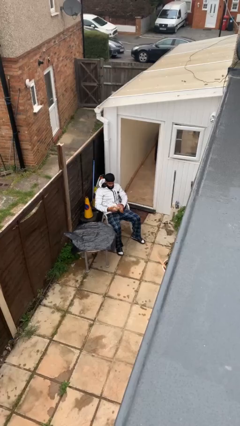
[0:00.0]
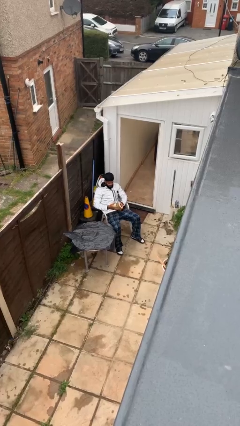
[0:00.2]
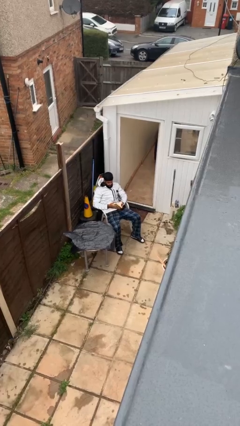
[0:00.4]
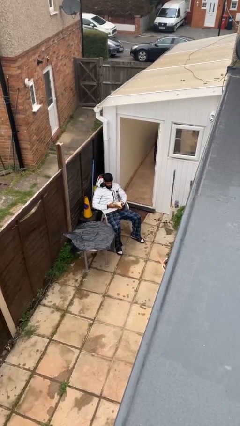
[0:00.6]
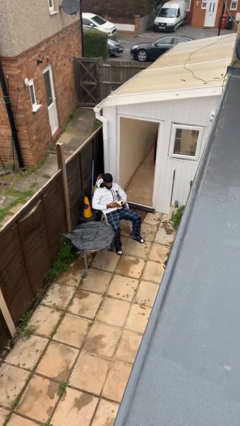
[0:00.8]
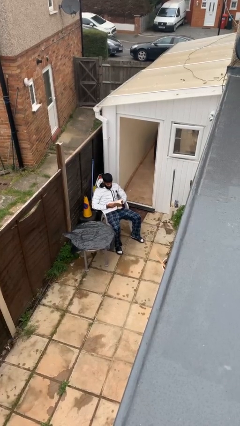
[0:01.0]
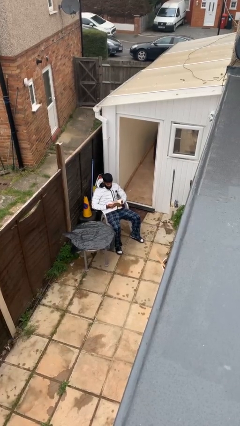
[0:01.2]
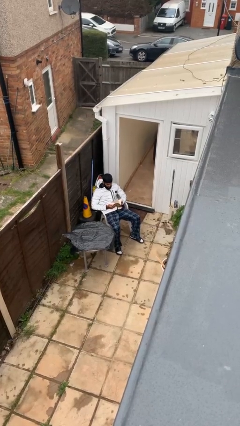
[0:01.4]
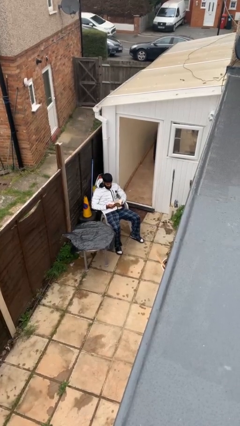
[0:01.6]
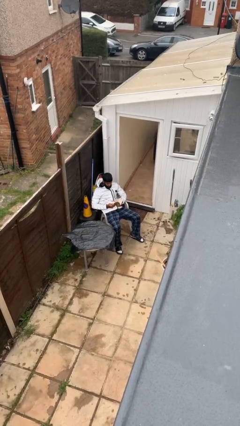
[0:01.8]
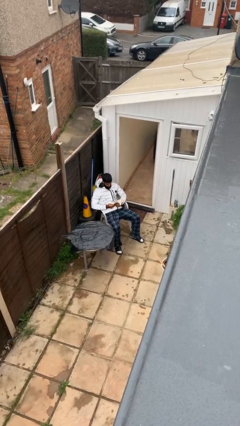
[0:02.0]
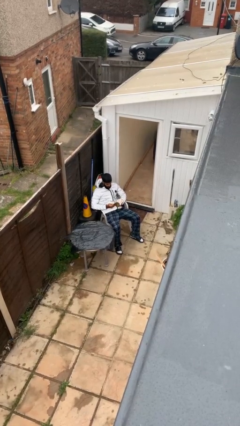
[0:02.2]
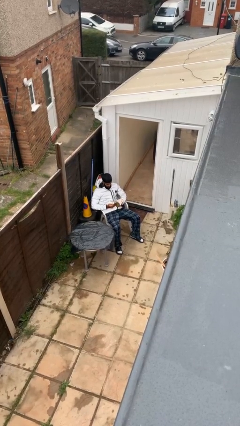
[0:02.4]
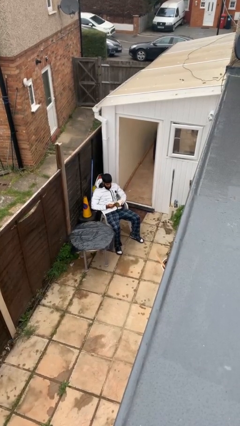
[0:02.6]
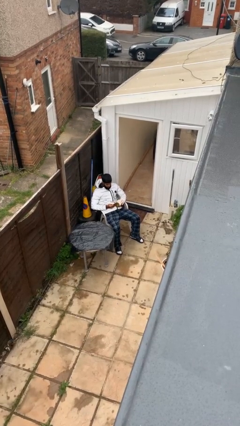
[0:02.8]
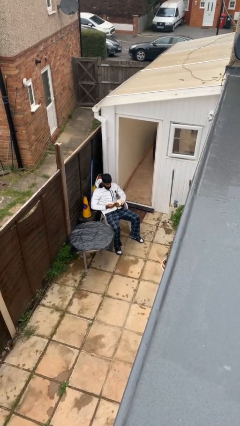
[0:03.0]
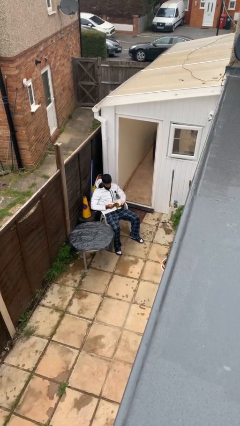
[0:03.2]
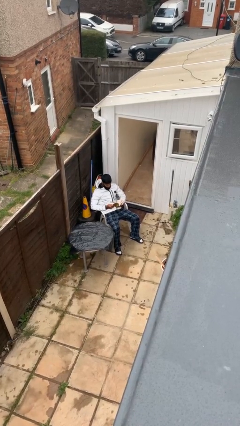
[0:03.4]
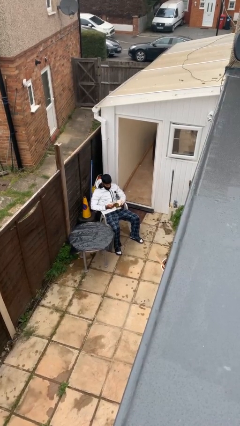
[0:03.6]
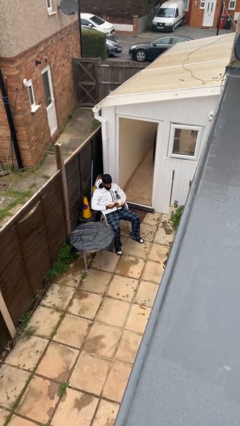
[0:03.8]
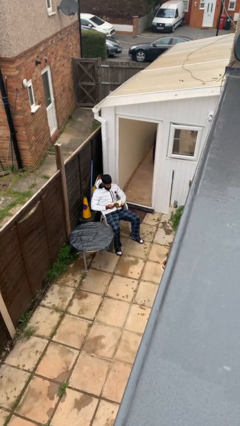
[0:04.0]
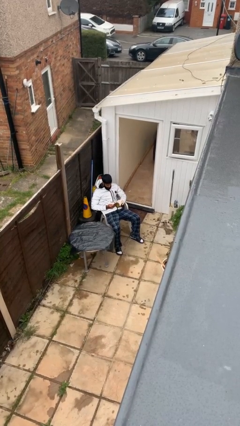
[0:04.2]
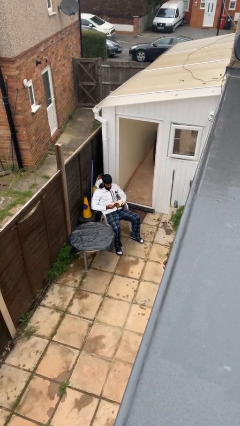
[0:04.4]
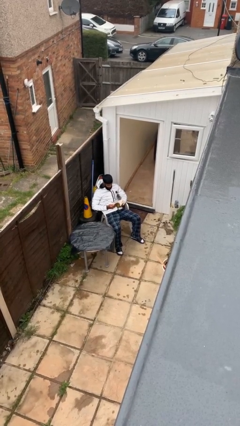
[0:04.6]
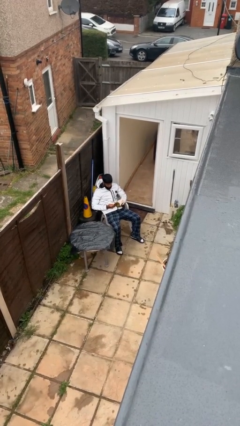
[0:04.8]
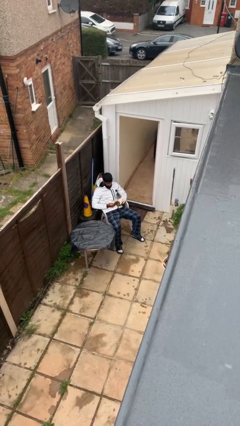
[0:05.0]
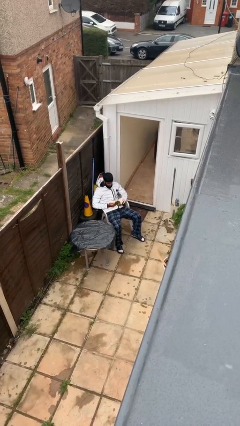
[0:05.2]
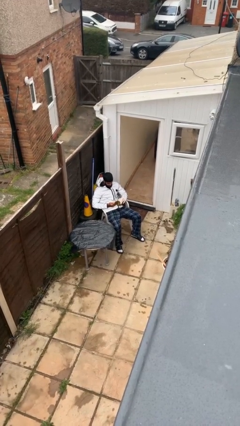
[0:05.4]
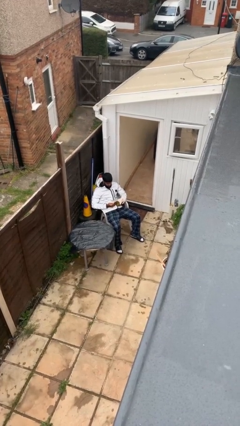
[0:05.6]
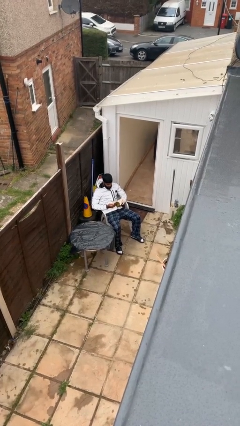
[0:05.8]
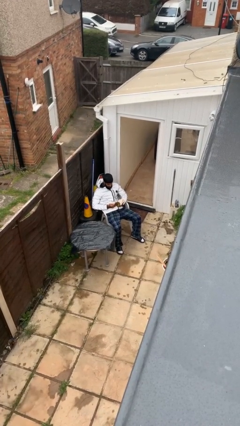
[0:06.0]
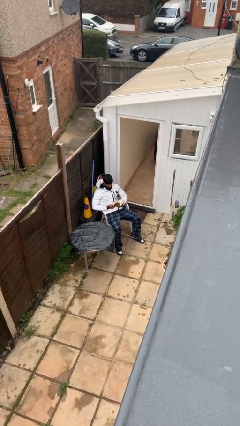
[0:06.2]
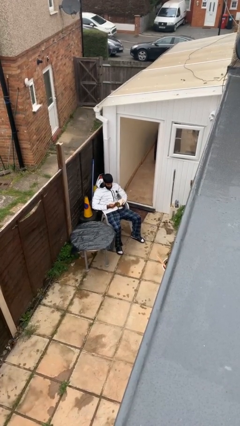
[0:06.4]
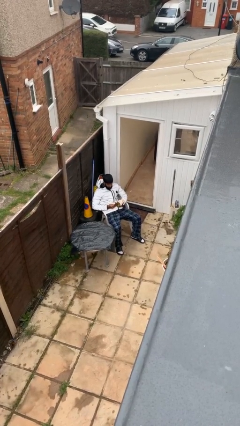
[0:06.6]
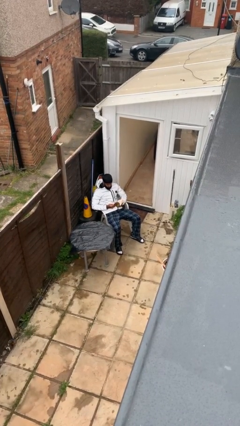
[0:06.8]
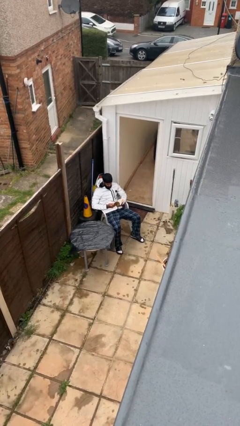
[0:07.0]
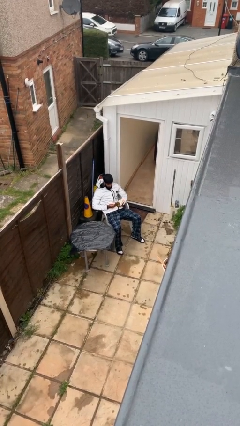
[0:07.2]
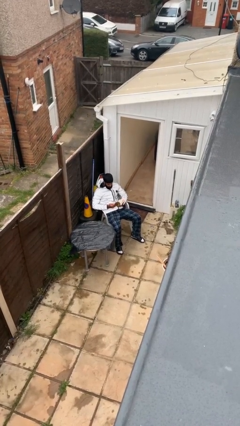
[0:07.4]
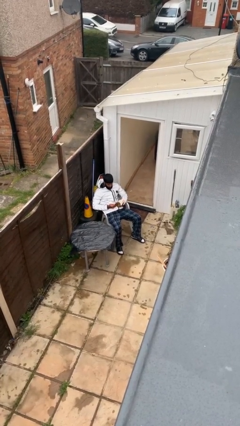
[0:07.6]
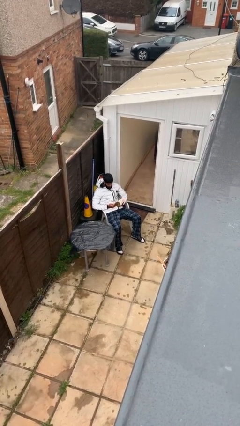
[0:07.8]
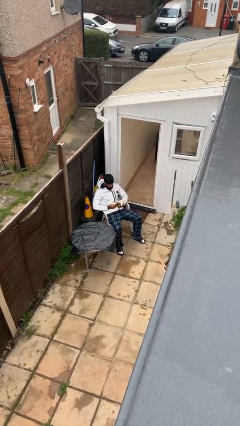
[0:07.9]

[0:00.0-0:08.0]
person reads document

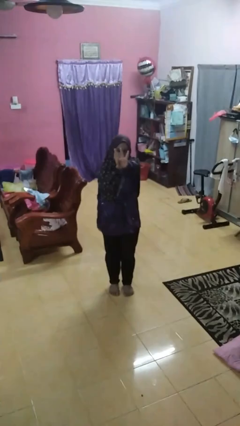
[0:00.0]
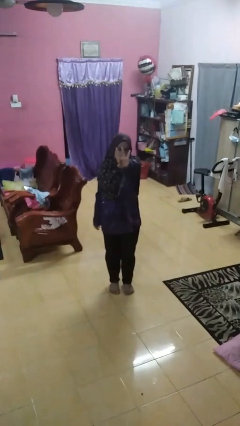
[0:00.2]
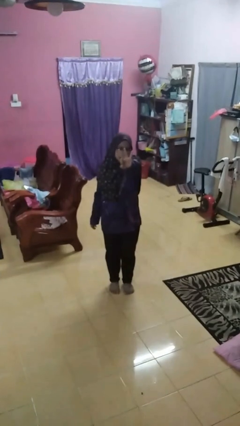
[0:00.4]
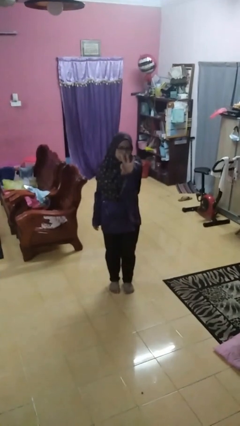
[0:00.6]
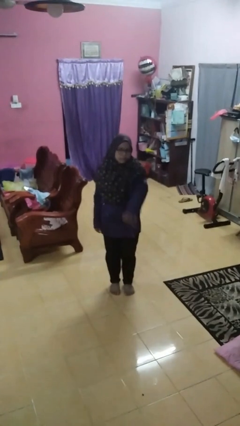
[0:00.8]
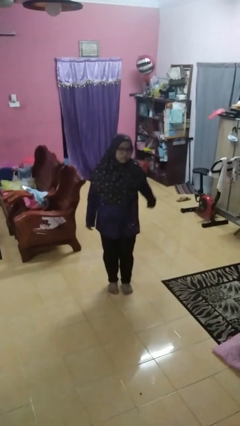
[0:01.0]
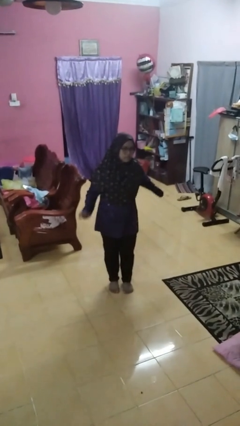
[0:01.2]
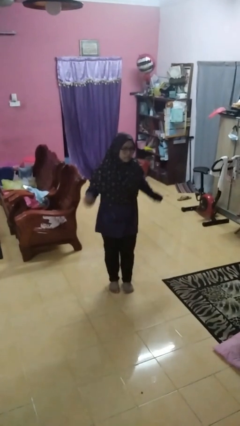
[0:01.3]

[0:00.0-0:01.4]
person gestures number three

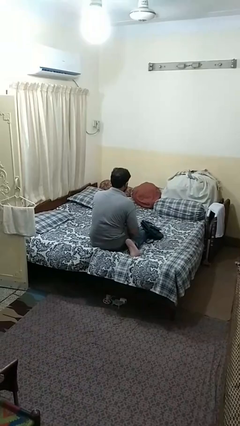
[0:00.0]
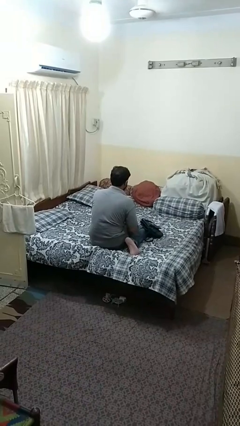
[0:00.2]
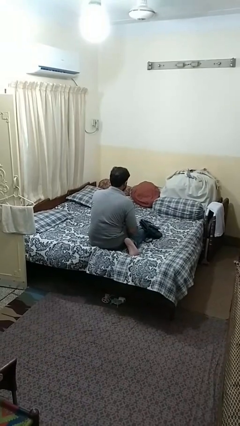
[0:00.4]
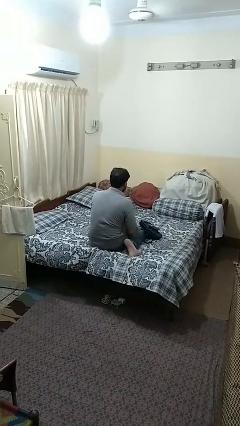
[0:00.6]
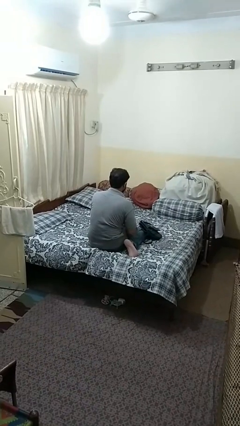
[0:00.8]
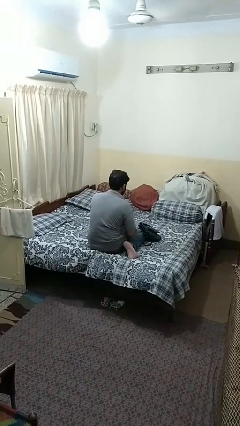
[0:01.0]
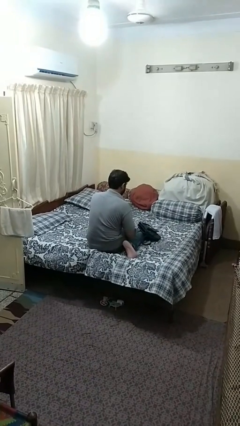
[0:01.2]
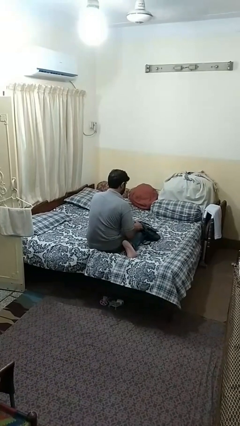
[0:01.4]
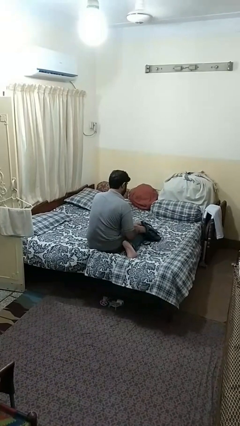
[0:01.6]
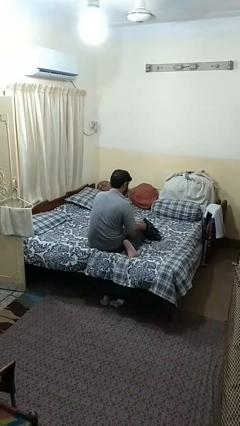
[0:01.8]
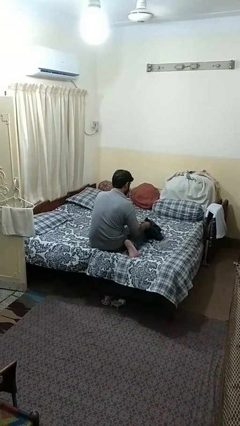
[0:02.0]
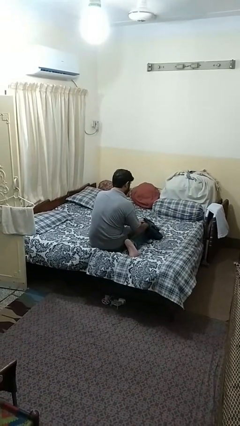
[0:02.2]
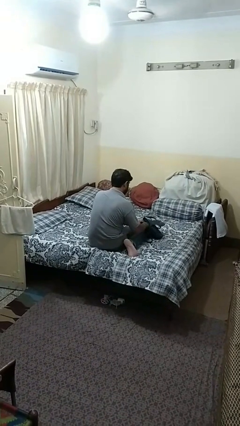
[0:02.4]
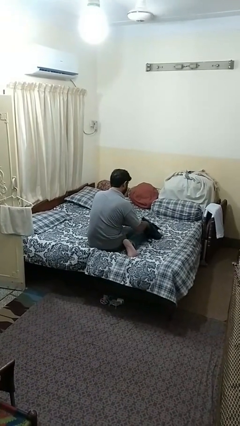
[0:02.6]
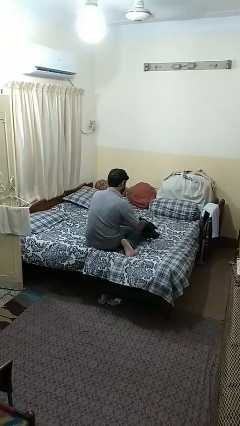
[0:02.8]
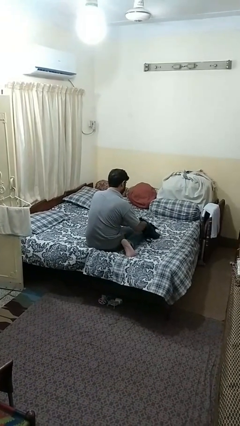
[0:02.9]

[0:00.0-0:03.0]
person searches in purse

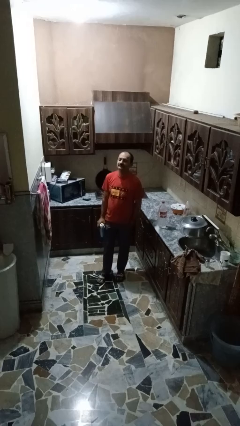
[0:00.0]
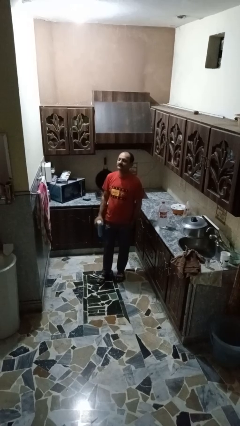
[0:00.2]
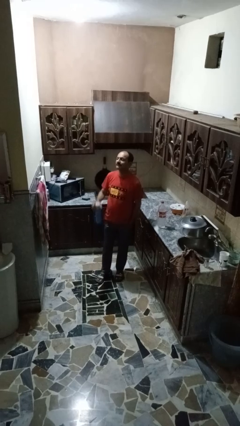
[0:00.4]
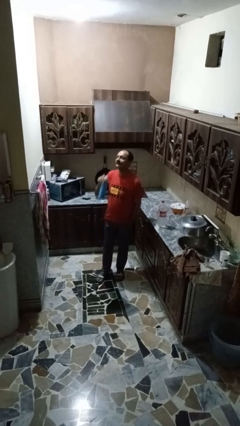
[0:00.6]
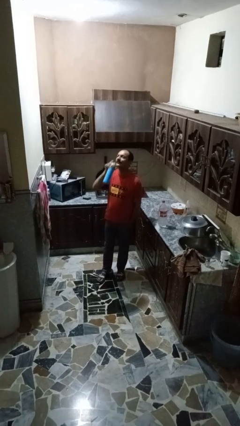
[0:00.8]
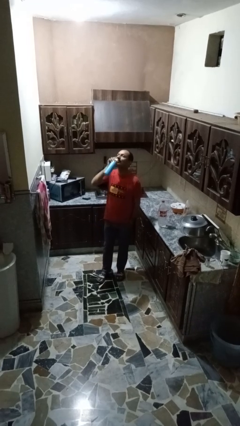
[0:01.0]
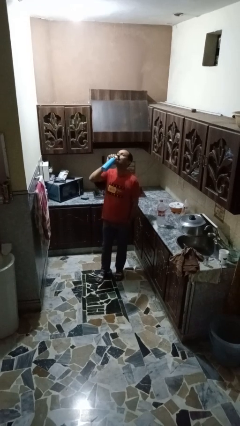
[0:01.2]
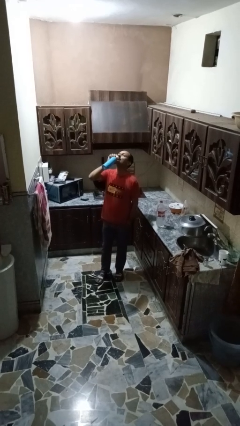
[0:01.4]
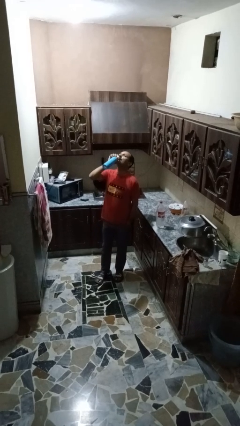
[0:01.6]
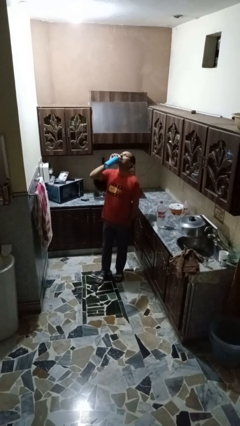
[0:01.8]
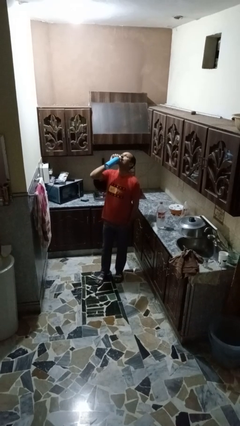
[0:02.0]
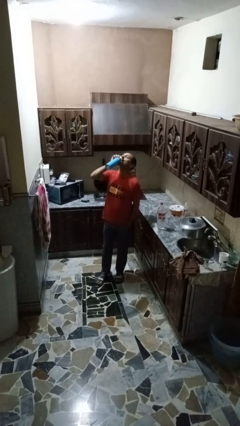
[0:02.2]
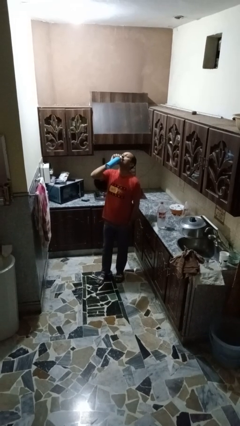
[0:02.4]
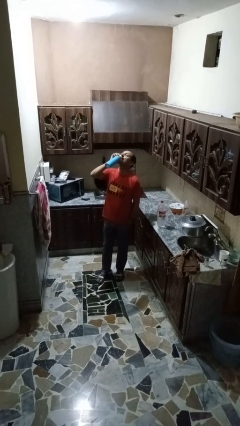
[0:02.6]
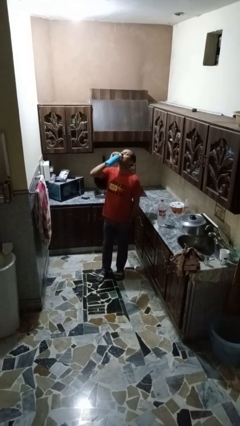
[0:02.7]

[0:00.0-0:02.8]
person drinks from bottle

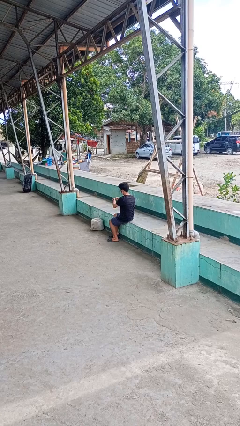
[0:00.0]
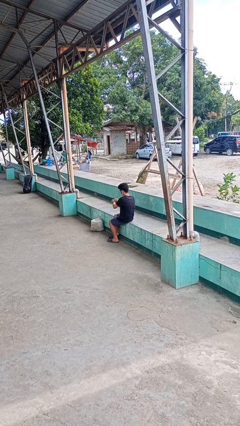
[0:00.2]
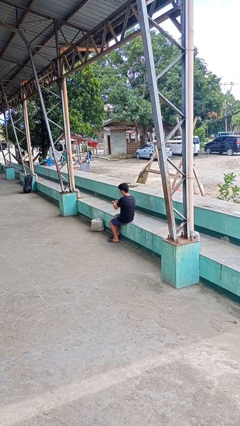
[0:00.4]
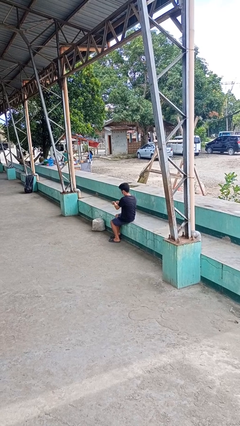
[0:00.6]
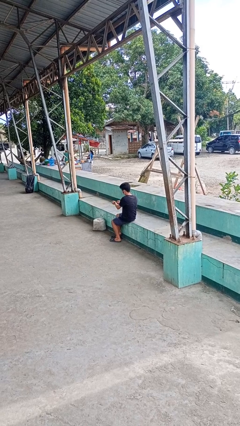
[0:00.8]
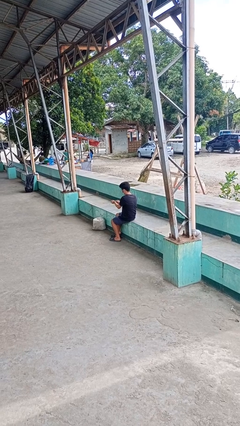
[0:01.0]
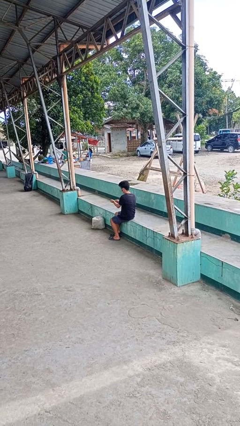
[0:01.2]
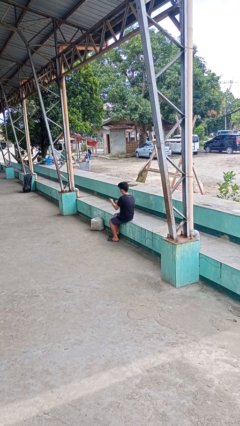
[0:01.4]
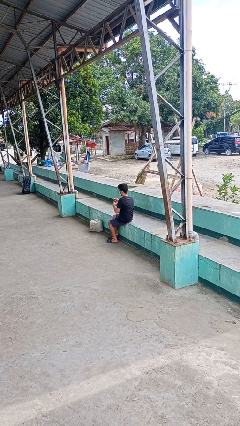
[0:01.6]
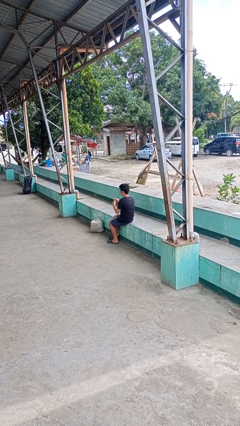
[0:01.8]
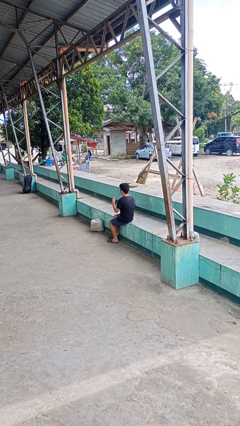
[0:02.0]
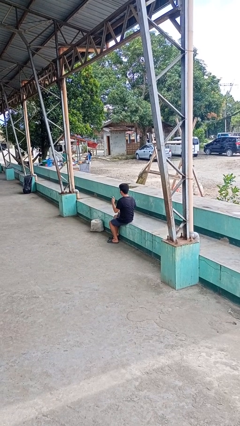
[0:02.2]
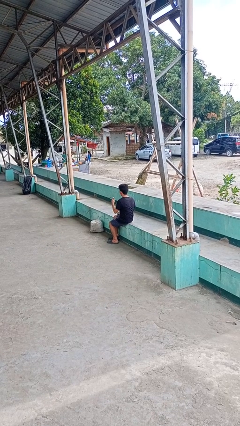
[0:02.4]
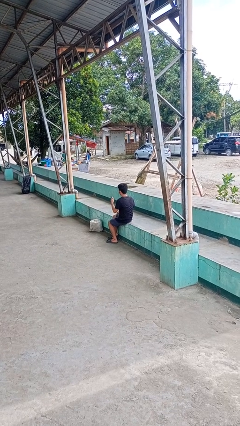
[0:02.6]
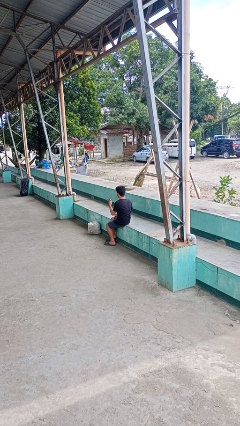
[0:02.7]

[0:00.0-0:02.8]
person takes off wristwatch
